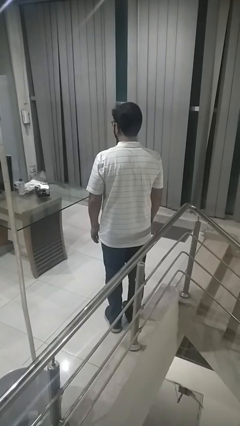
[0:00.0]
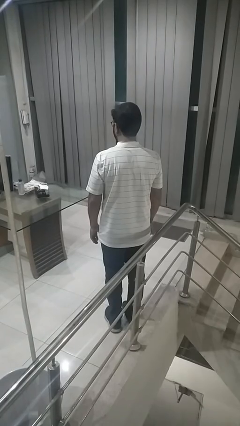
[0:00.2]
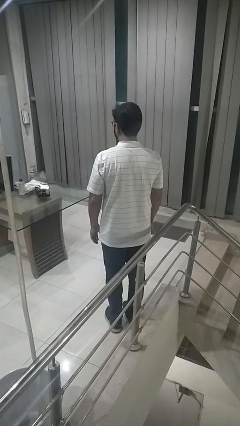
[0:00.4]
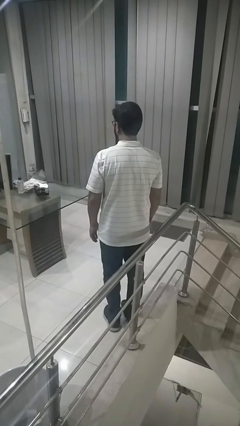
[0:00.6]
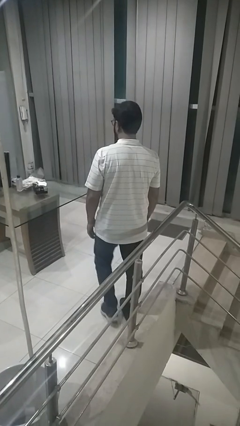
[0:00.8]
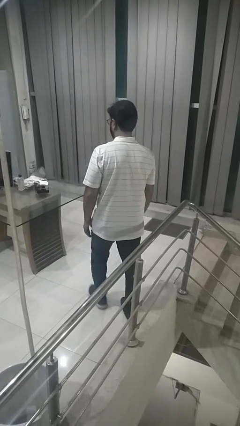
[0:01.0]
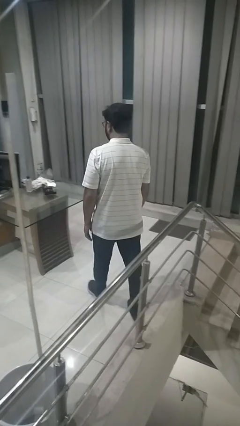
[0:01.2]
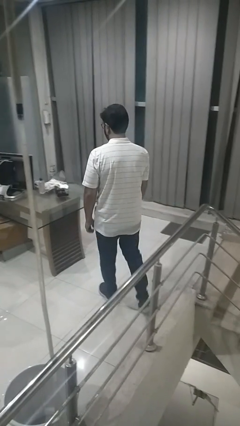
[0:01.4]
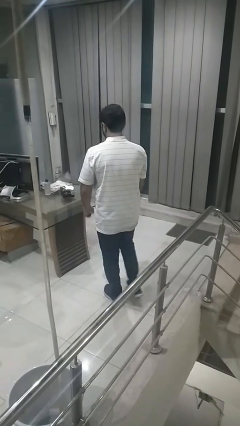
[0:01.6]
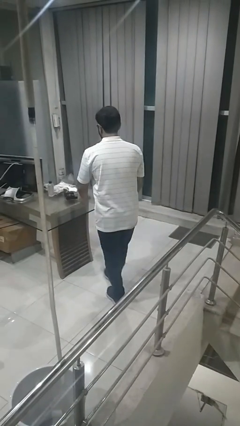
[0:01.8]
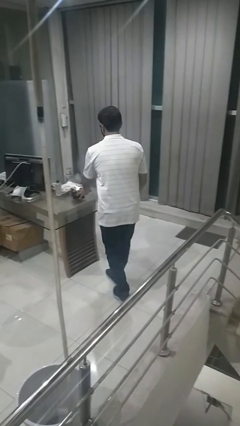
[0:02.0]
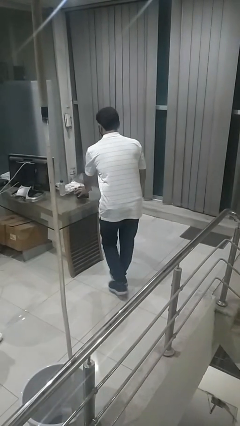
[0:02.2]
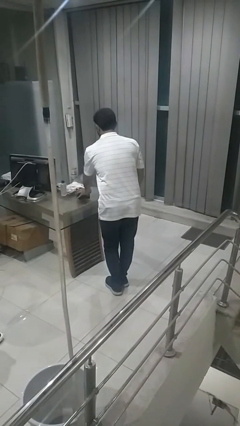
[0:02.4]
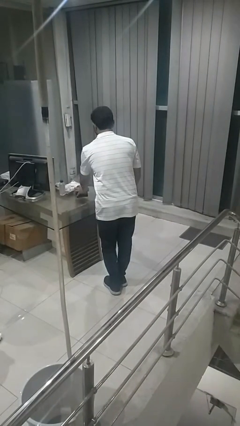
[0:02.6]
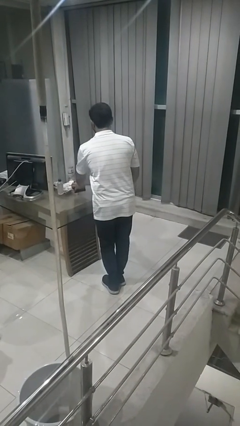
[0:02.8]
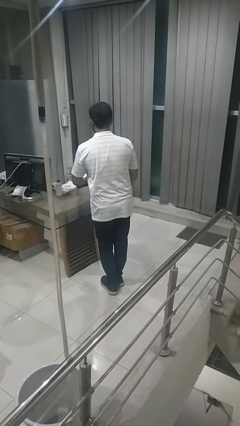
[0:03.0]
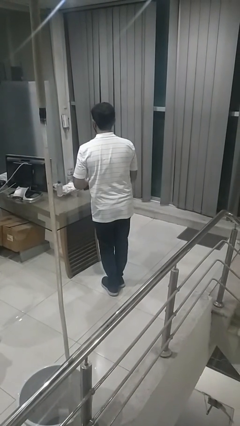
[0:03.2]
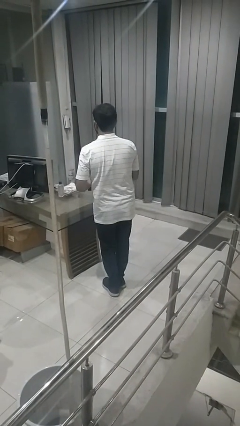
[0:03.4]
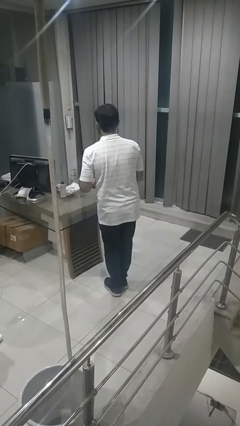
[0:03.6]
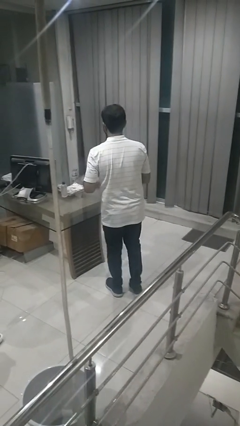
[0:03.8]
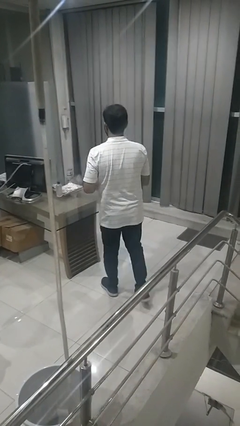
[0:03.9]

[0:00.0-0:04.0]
person picks up object from table

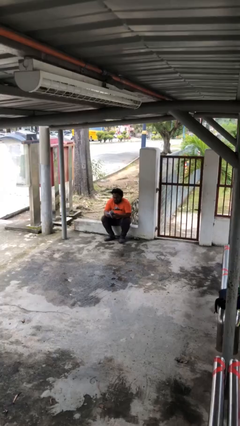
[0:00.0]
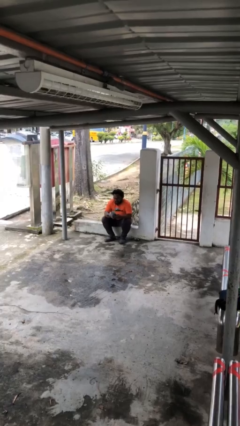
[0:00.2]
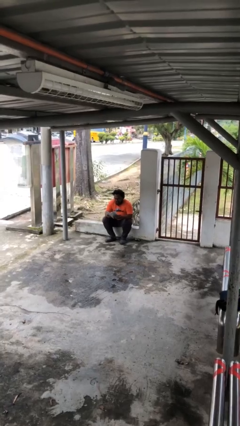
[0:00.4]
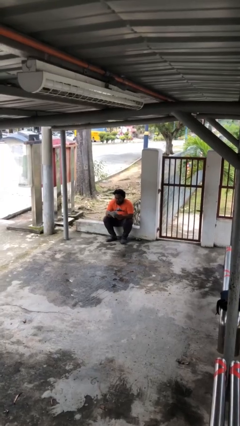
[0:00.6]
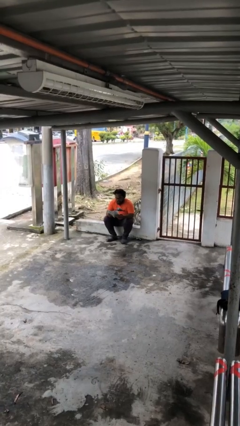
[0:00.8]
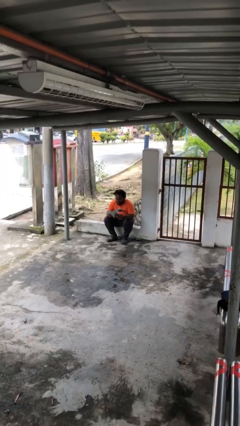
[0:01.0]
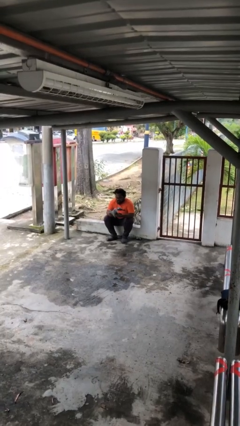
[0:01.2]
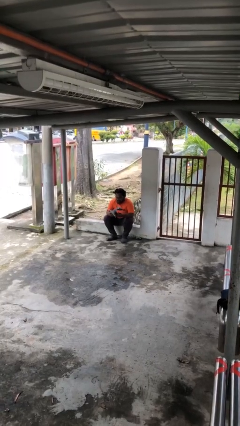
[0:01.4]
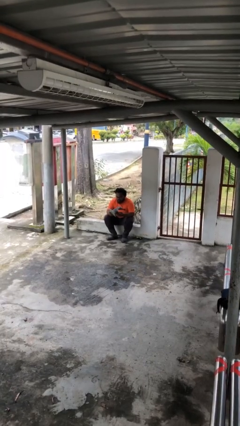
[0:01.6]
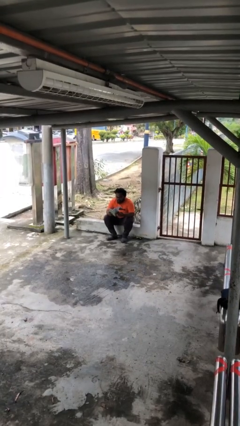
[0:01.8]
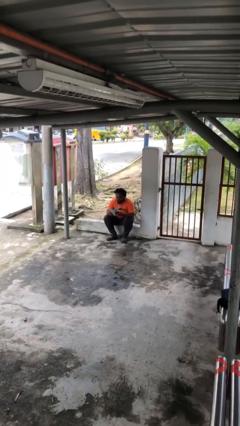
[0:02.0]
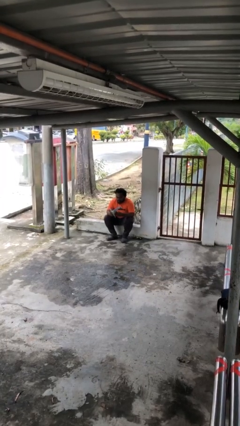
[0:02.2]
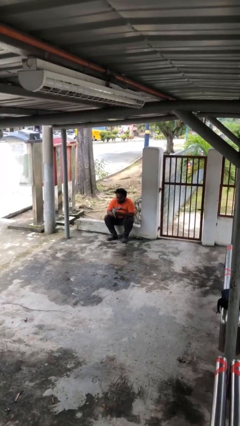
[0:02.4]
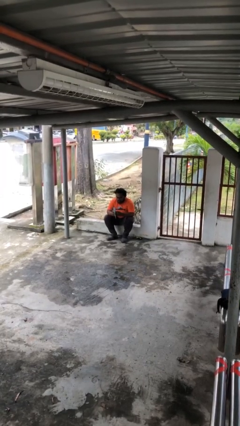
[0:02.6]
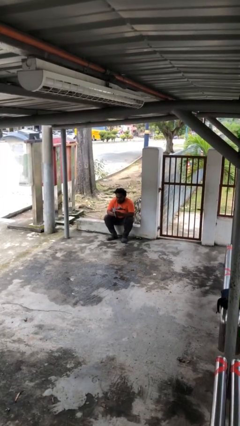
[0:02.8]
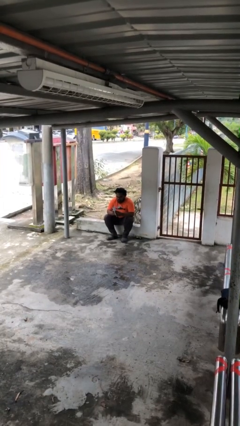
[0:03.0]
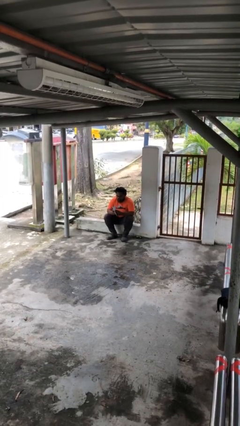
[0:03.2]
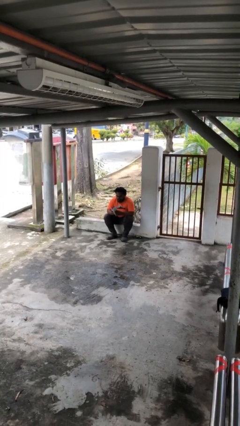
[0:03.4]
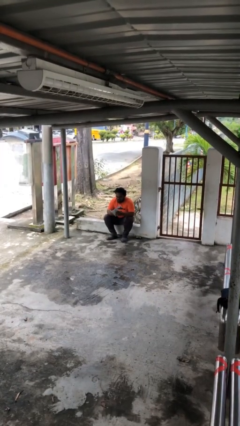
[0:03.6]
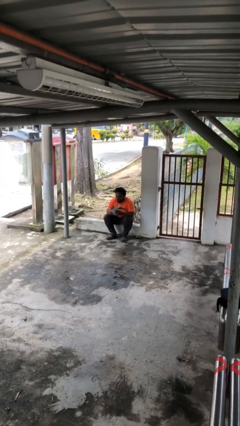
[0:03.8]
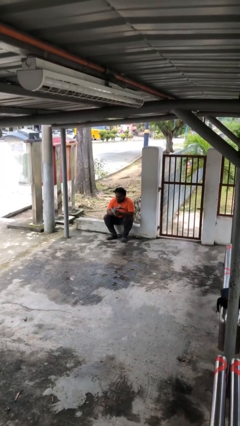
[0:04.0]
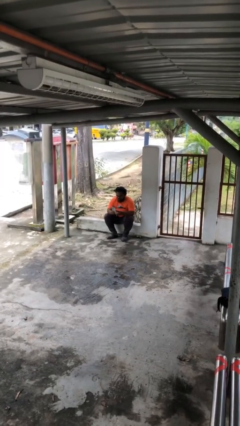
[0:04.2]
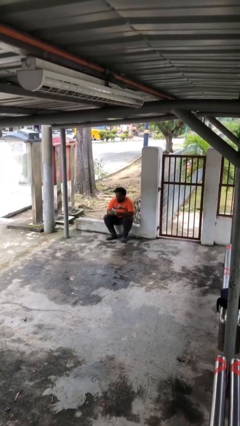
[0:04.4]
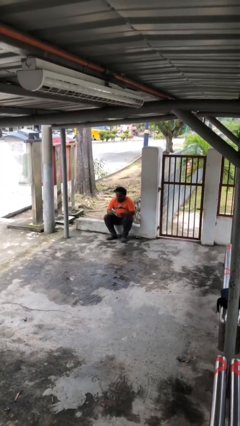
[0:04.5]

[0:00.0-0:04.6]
person reads document

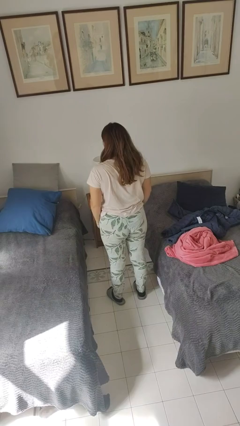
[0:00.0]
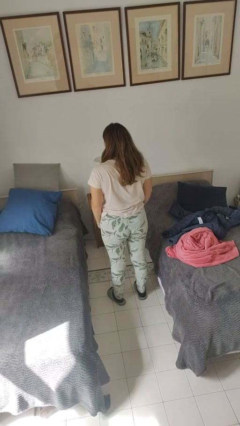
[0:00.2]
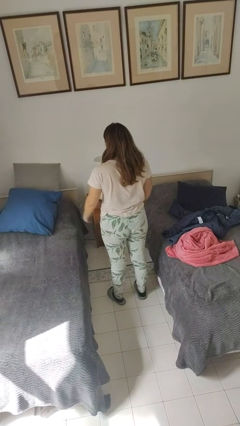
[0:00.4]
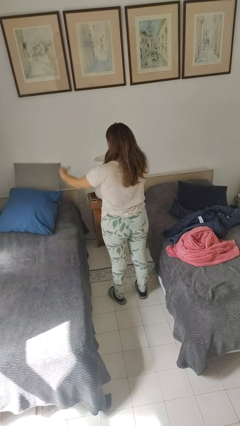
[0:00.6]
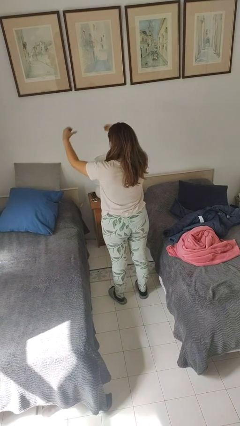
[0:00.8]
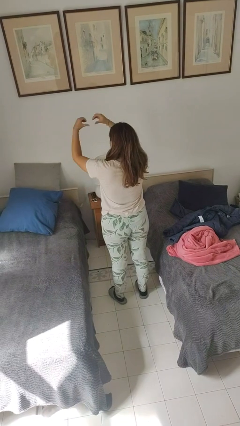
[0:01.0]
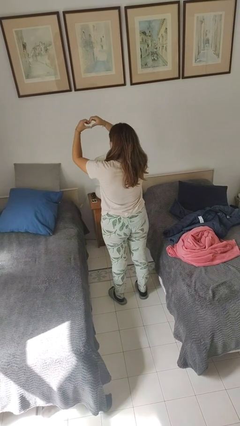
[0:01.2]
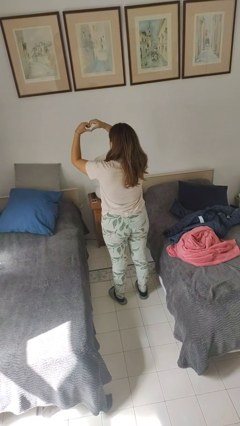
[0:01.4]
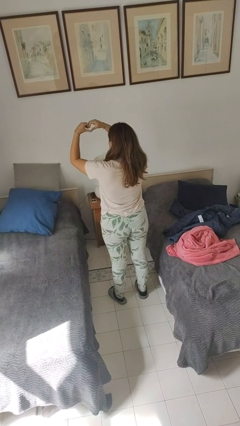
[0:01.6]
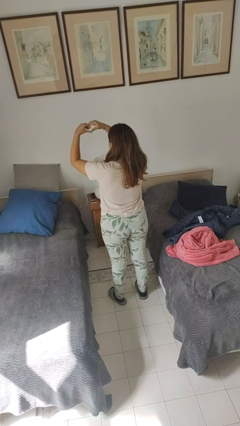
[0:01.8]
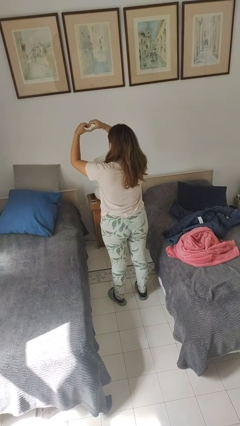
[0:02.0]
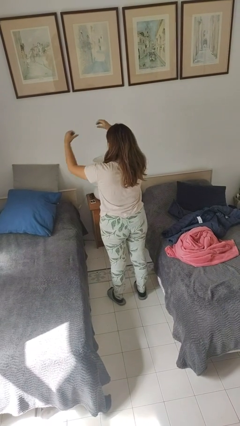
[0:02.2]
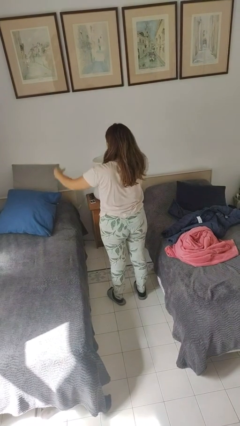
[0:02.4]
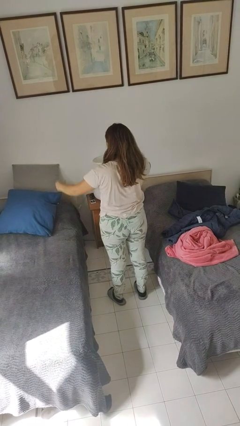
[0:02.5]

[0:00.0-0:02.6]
person gestures heart

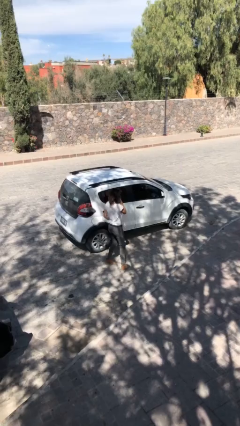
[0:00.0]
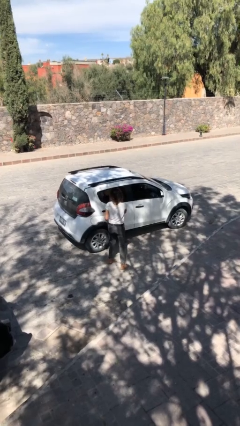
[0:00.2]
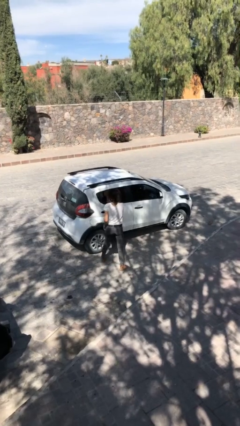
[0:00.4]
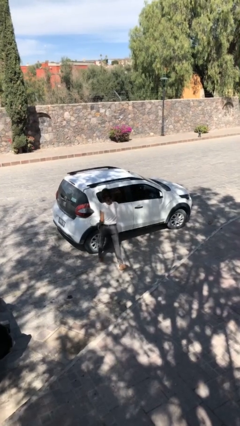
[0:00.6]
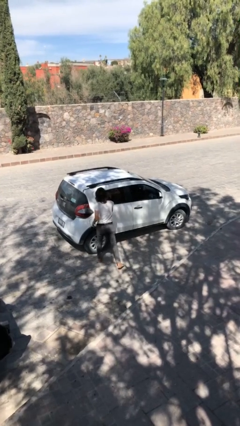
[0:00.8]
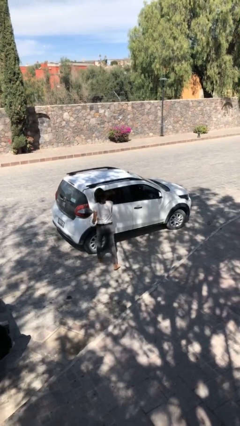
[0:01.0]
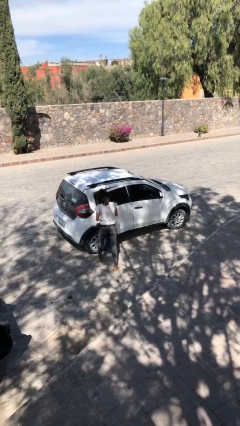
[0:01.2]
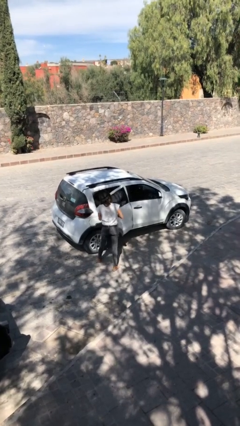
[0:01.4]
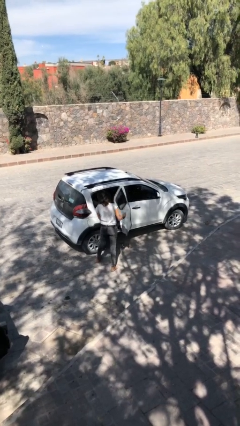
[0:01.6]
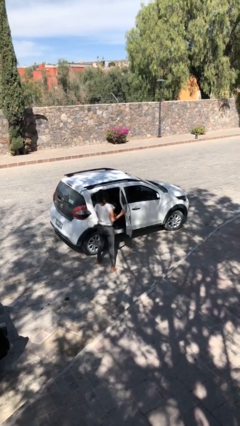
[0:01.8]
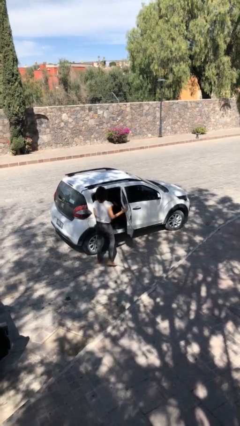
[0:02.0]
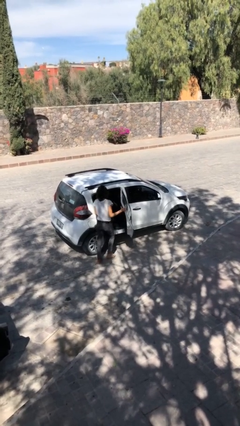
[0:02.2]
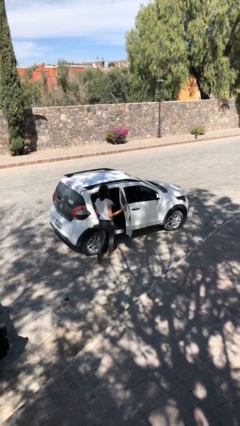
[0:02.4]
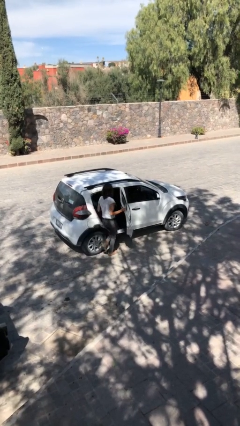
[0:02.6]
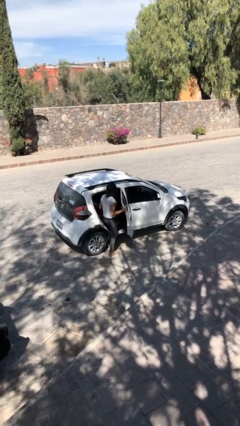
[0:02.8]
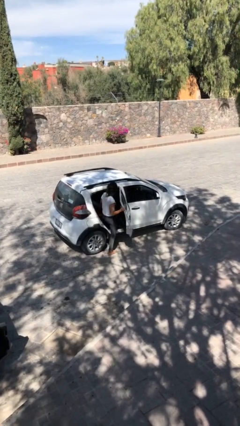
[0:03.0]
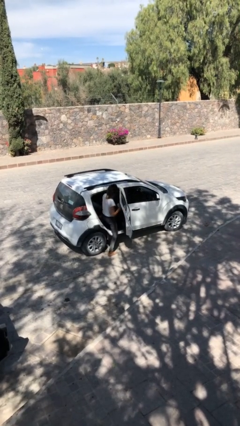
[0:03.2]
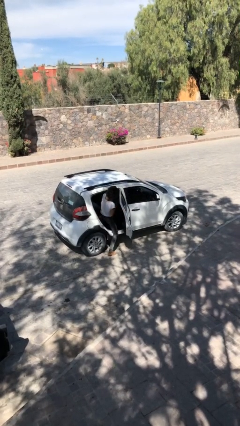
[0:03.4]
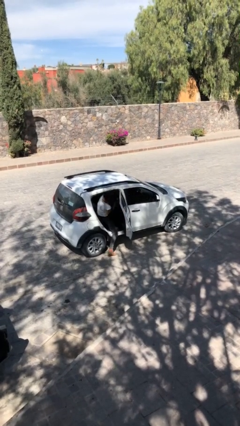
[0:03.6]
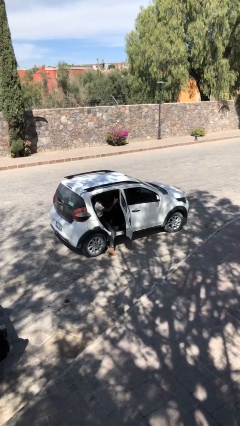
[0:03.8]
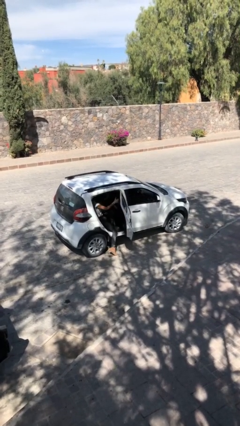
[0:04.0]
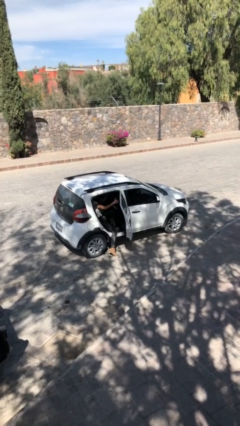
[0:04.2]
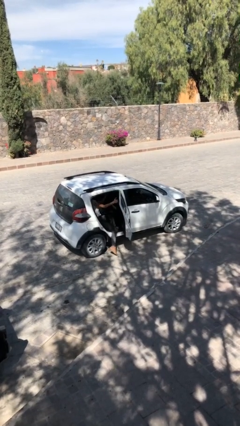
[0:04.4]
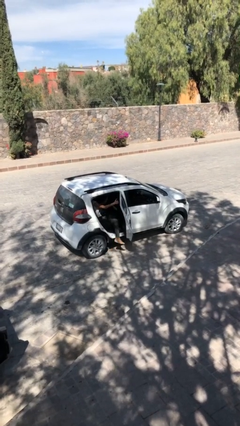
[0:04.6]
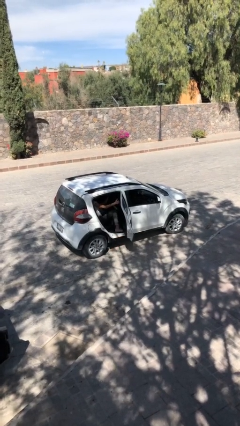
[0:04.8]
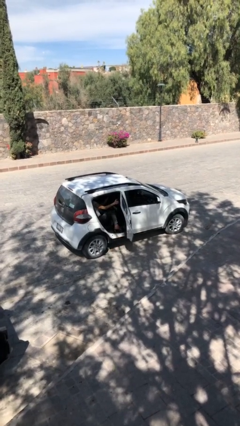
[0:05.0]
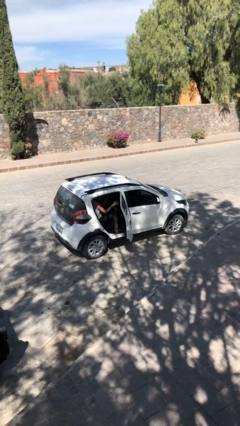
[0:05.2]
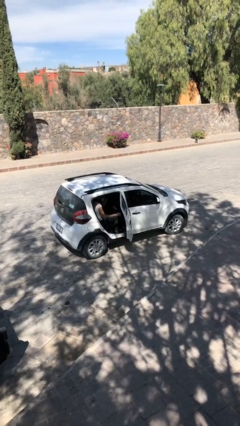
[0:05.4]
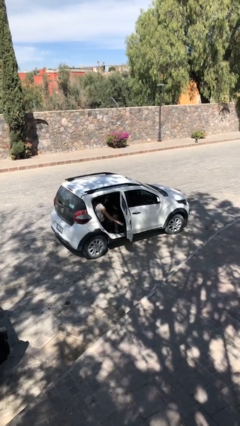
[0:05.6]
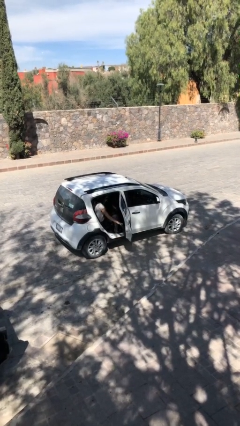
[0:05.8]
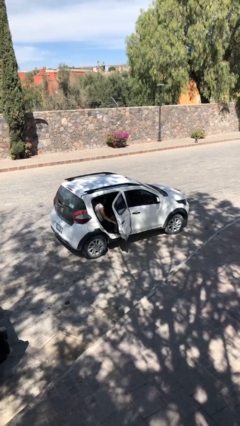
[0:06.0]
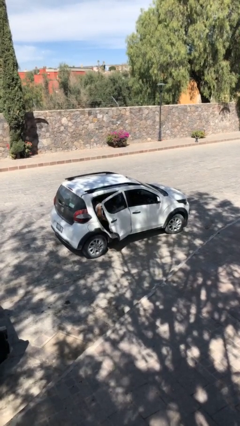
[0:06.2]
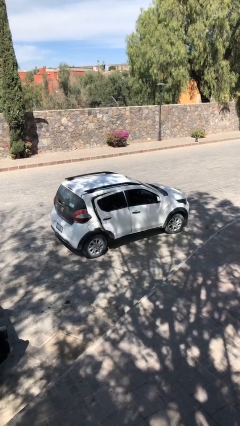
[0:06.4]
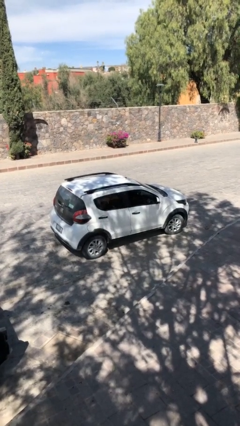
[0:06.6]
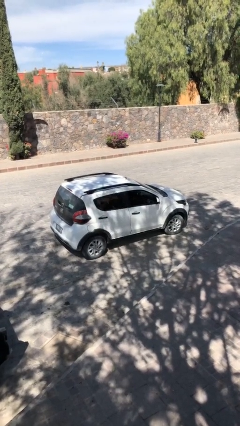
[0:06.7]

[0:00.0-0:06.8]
car picks up person
